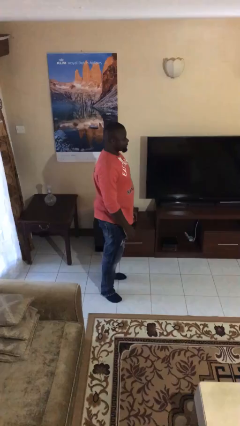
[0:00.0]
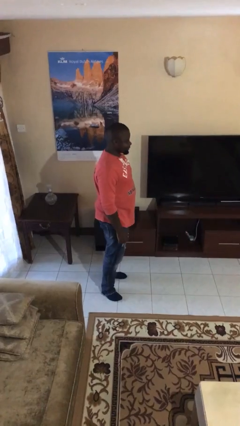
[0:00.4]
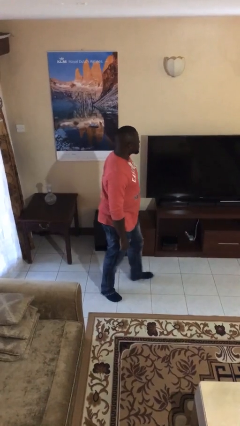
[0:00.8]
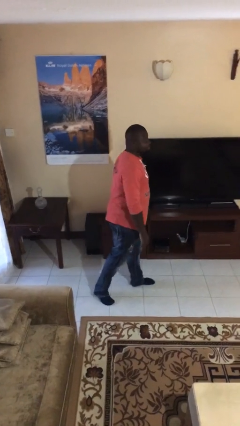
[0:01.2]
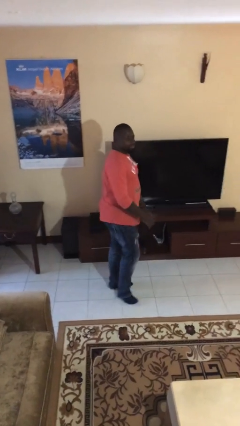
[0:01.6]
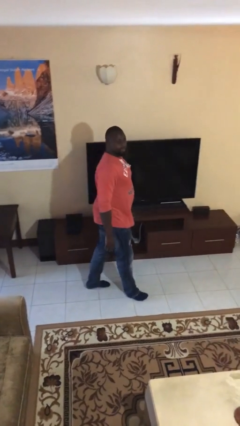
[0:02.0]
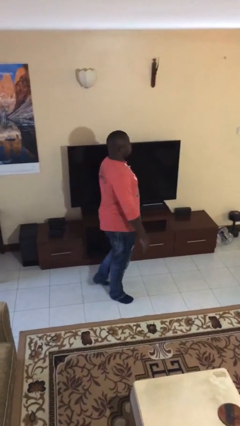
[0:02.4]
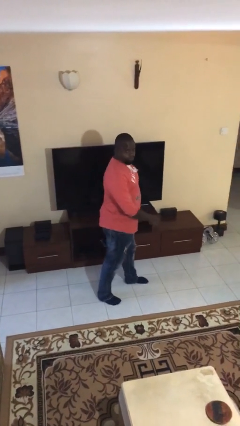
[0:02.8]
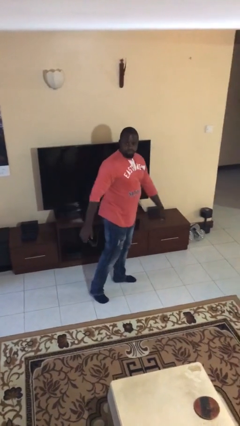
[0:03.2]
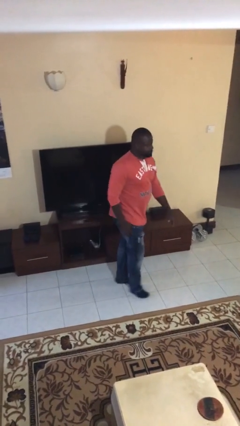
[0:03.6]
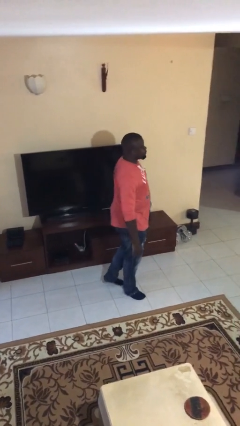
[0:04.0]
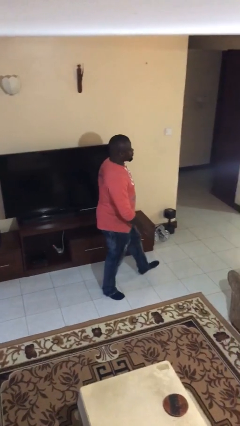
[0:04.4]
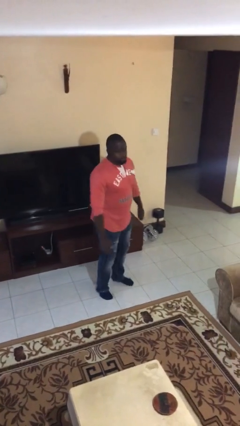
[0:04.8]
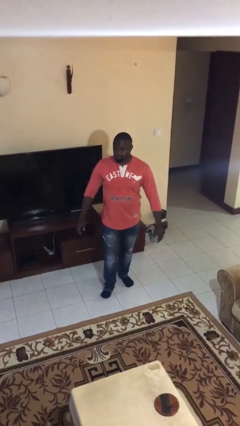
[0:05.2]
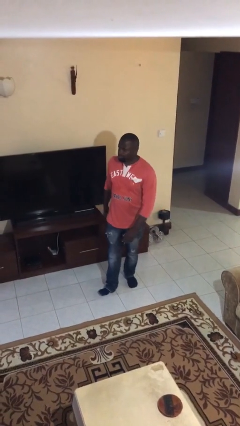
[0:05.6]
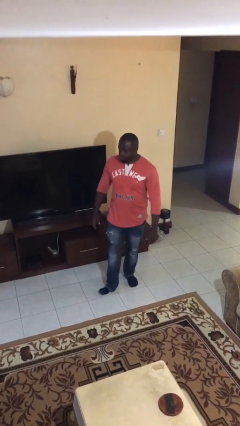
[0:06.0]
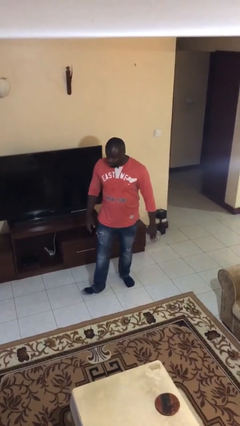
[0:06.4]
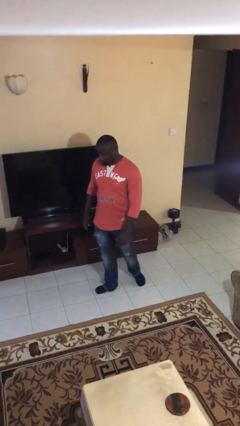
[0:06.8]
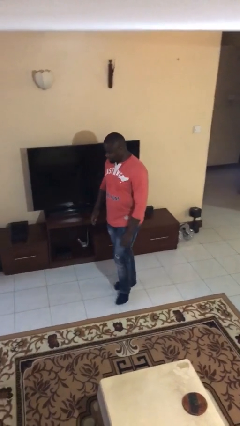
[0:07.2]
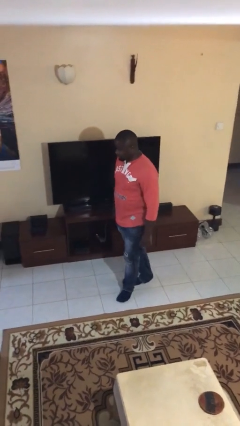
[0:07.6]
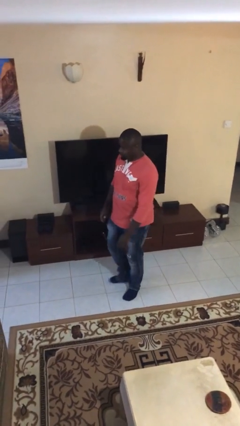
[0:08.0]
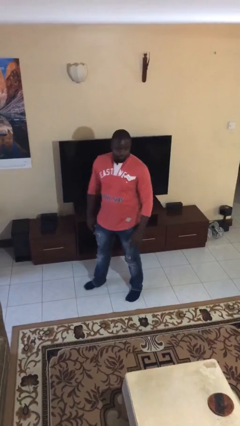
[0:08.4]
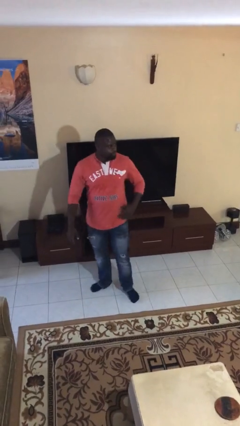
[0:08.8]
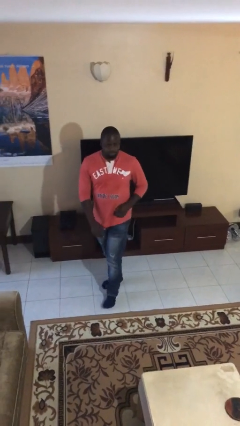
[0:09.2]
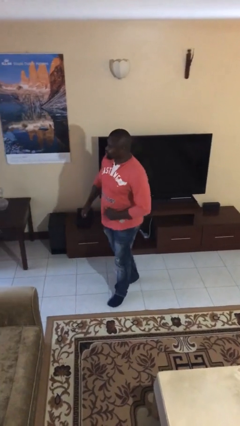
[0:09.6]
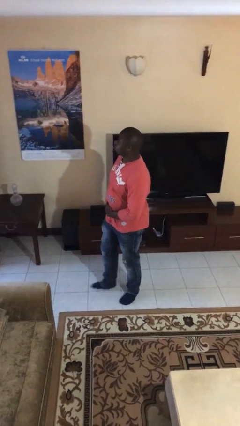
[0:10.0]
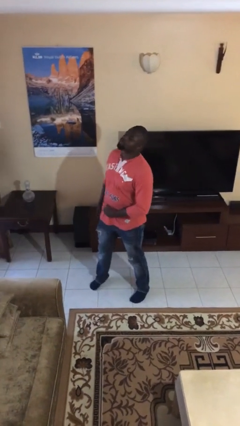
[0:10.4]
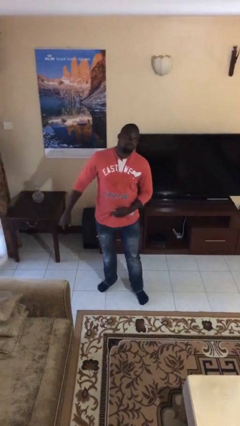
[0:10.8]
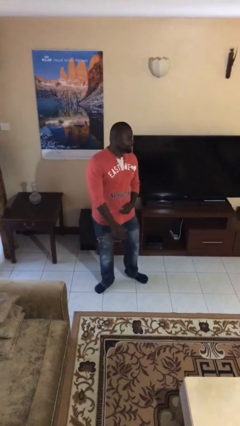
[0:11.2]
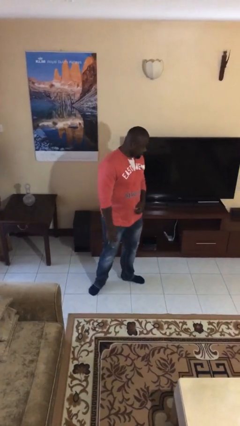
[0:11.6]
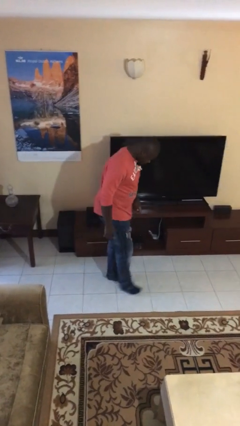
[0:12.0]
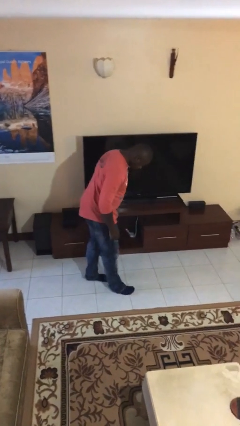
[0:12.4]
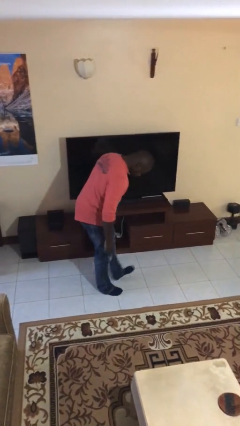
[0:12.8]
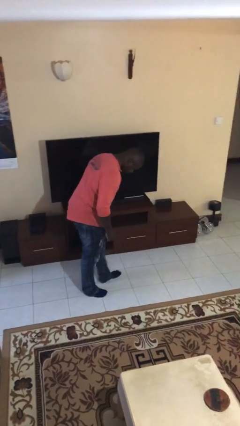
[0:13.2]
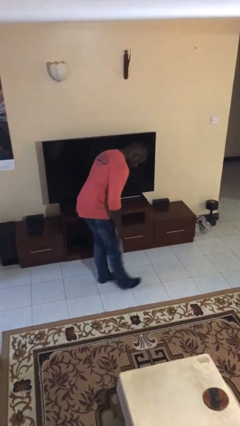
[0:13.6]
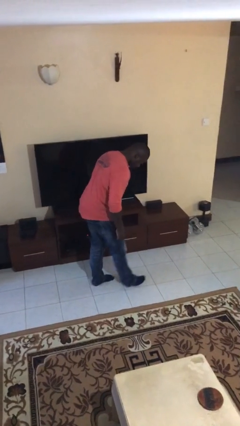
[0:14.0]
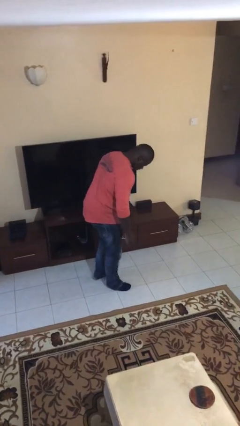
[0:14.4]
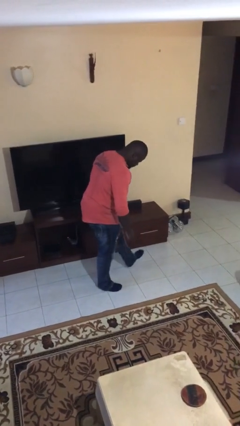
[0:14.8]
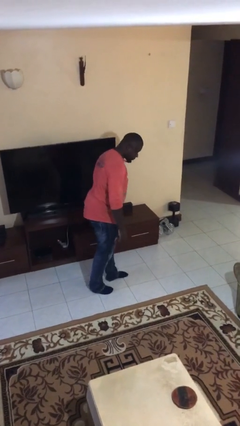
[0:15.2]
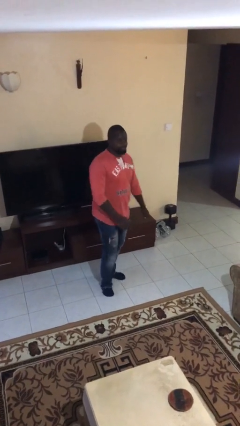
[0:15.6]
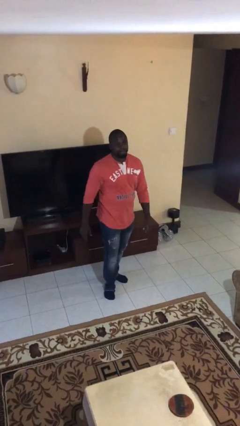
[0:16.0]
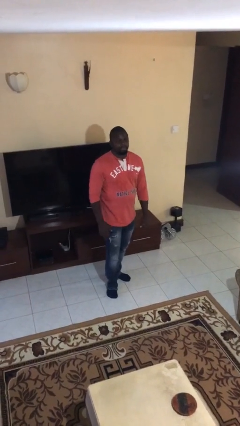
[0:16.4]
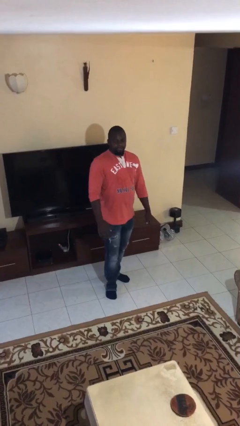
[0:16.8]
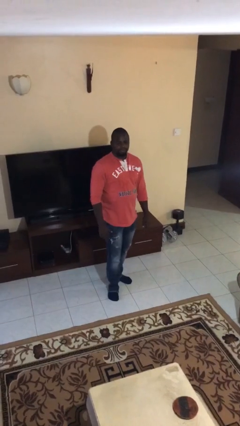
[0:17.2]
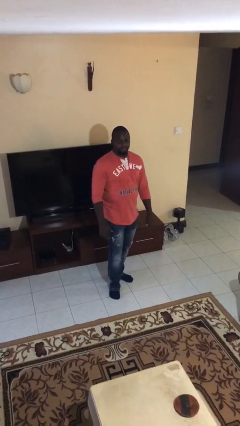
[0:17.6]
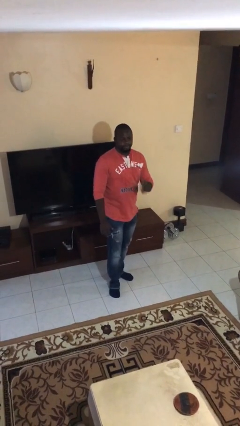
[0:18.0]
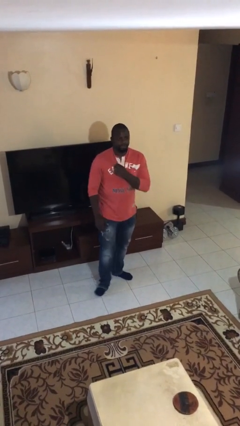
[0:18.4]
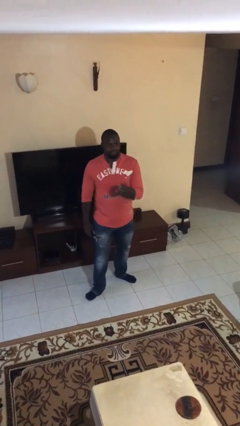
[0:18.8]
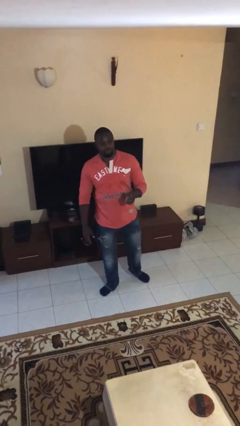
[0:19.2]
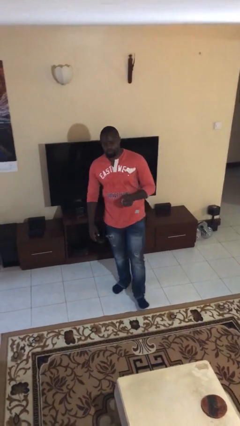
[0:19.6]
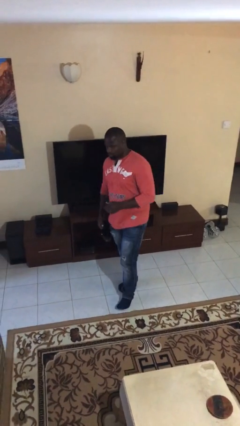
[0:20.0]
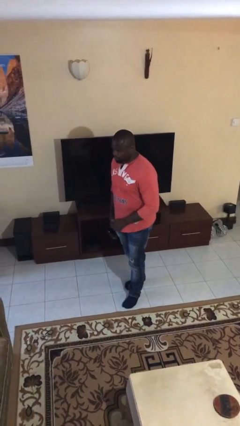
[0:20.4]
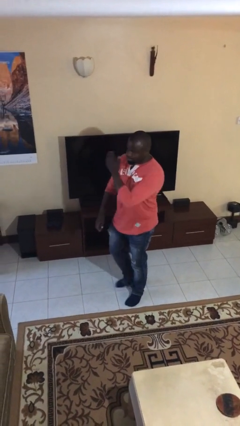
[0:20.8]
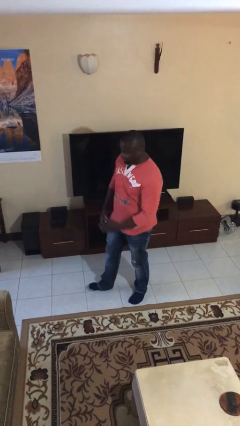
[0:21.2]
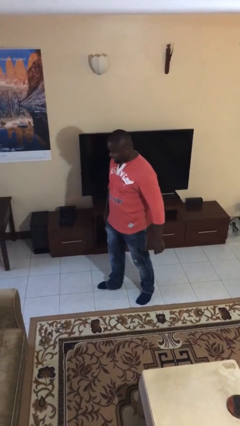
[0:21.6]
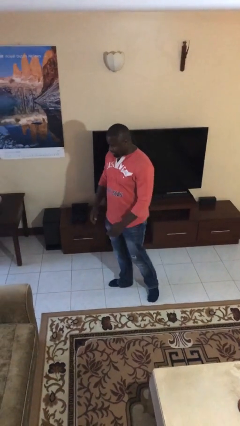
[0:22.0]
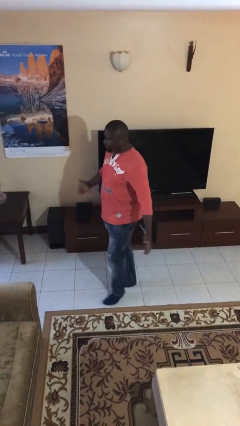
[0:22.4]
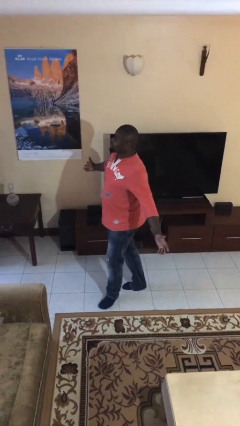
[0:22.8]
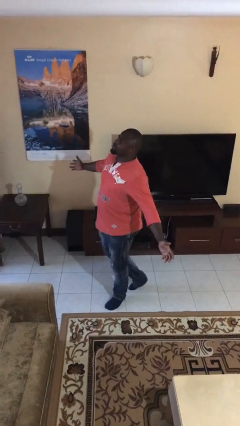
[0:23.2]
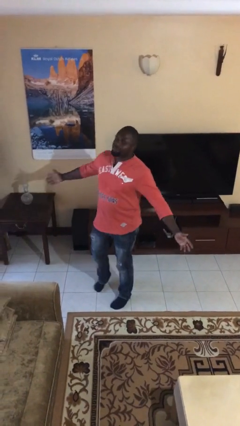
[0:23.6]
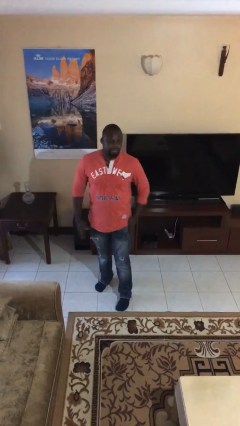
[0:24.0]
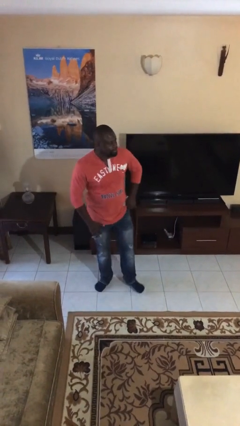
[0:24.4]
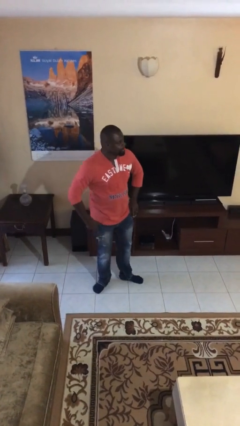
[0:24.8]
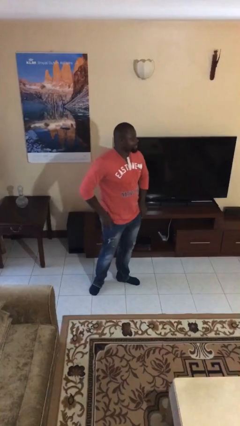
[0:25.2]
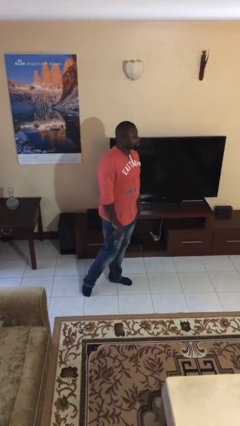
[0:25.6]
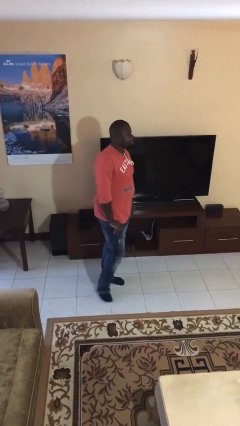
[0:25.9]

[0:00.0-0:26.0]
person walks

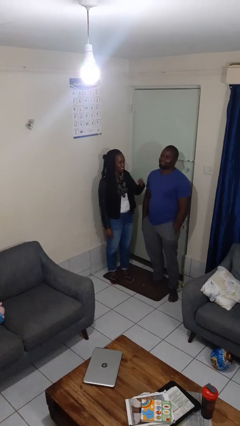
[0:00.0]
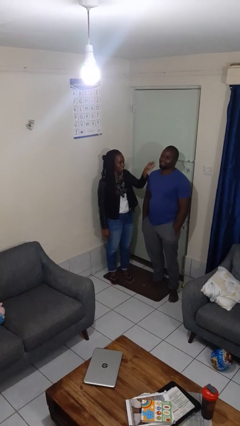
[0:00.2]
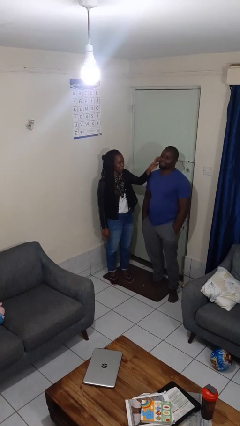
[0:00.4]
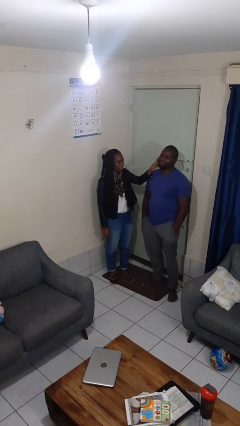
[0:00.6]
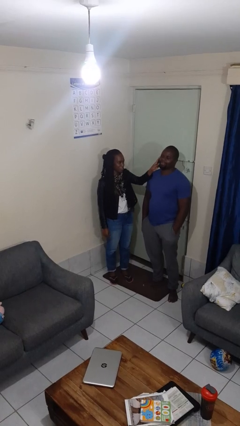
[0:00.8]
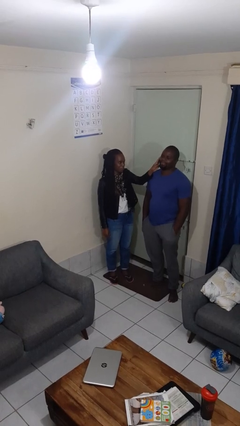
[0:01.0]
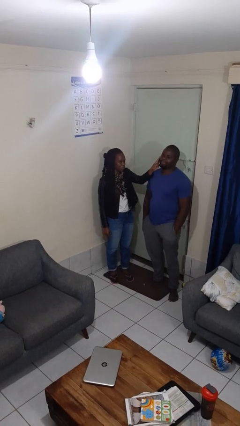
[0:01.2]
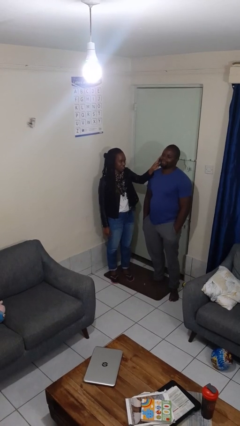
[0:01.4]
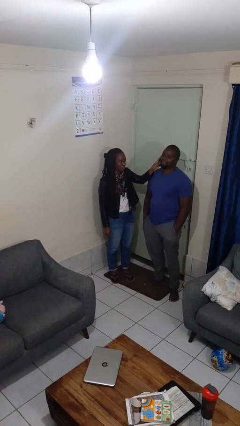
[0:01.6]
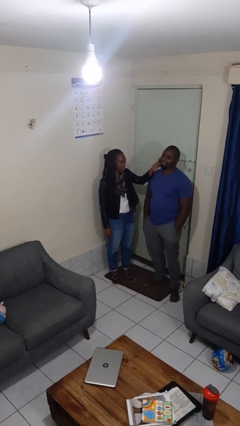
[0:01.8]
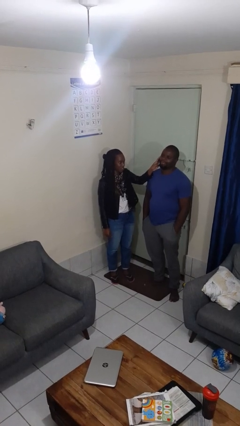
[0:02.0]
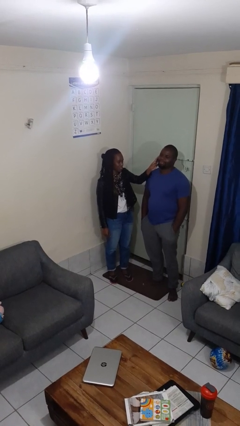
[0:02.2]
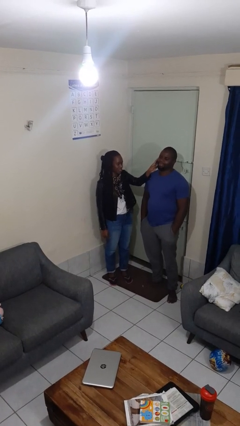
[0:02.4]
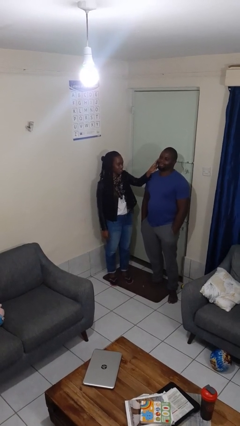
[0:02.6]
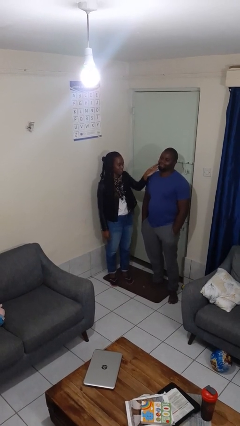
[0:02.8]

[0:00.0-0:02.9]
person touches face of person

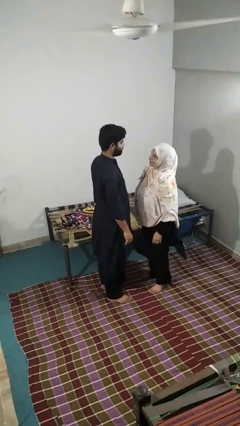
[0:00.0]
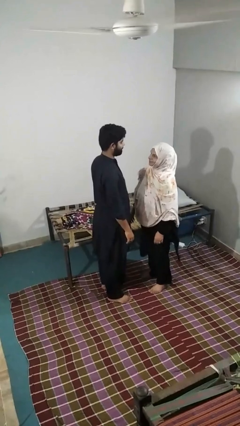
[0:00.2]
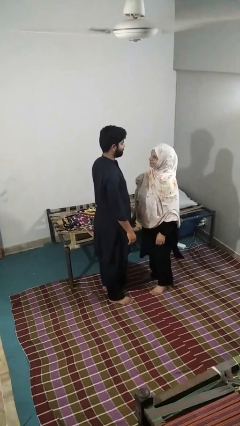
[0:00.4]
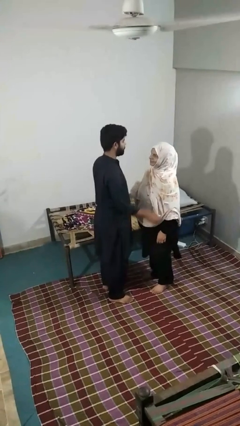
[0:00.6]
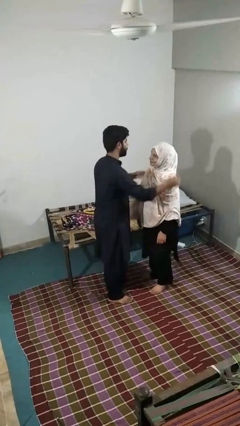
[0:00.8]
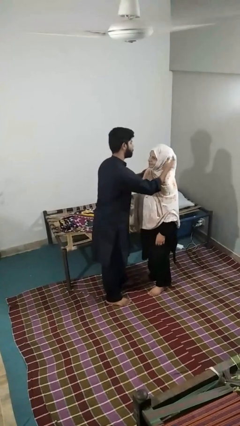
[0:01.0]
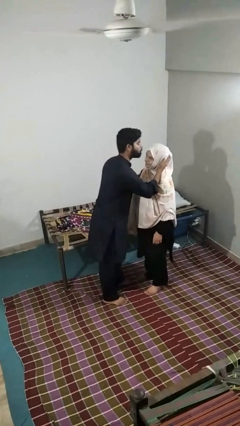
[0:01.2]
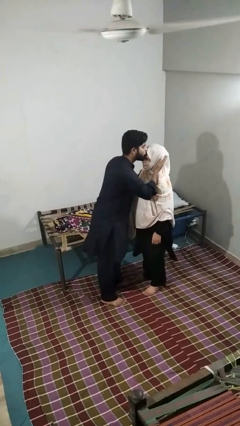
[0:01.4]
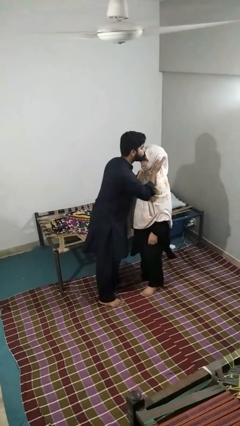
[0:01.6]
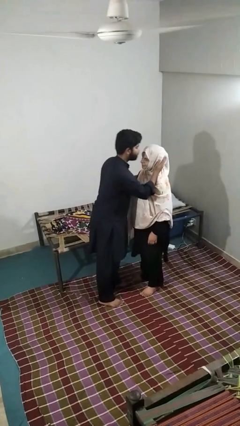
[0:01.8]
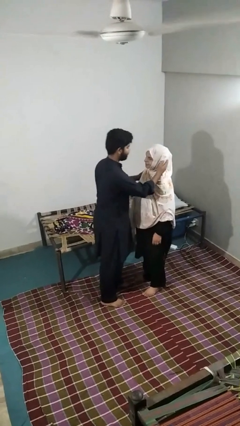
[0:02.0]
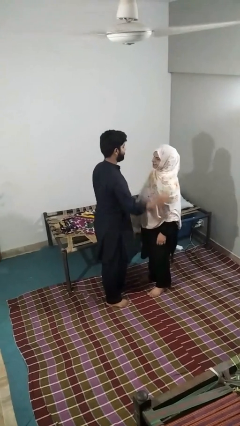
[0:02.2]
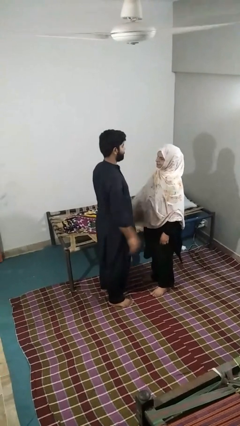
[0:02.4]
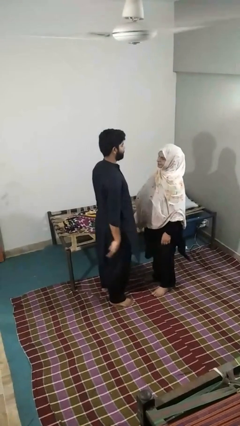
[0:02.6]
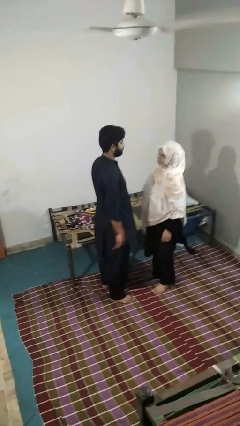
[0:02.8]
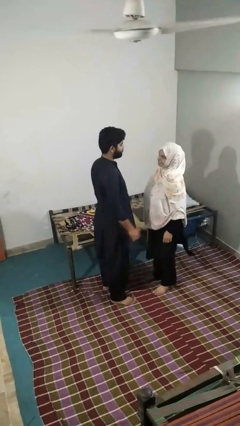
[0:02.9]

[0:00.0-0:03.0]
person kisses cheek of person
